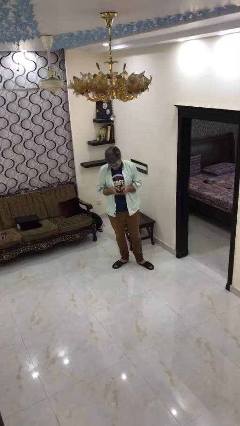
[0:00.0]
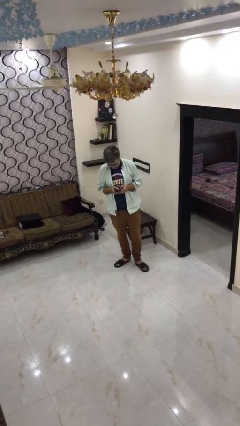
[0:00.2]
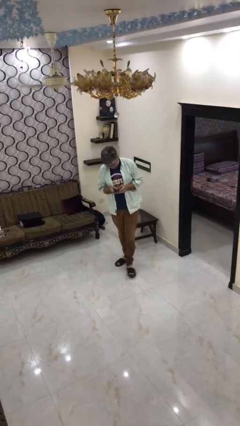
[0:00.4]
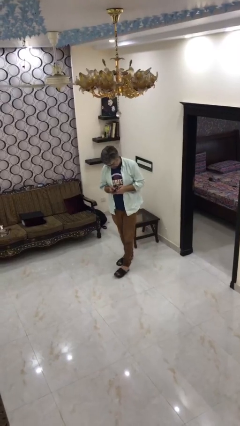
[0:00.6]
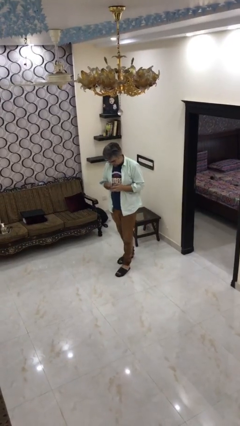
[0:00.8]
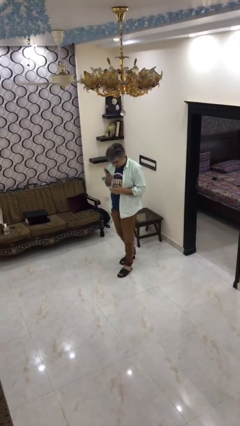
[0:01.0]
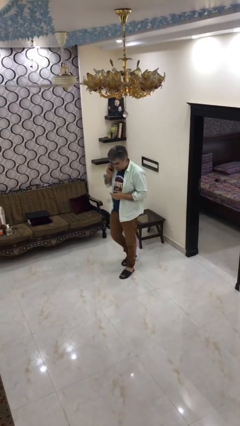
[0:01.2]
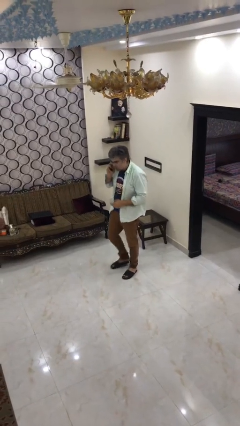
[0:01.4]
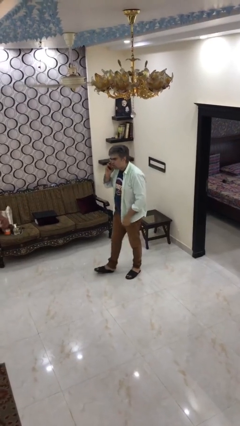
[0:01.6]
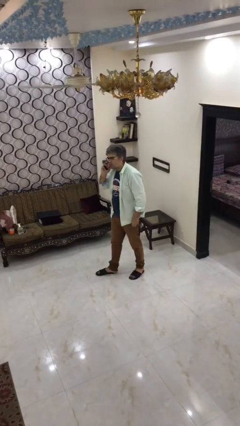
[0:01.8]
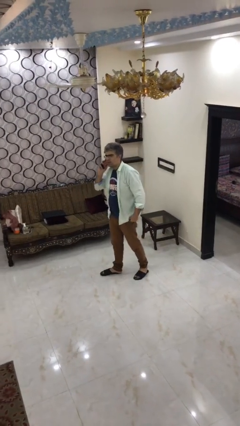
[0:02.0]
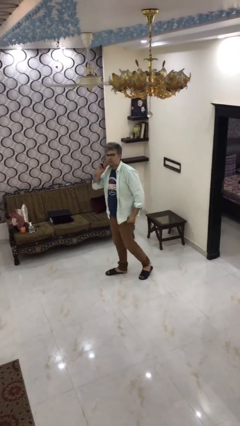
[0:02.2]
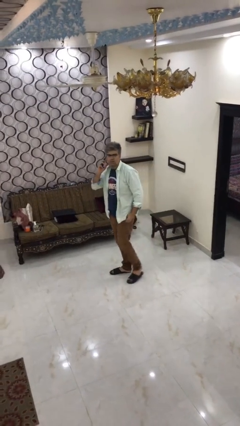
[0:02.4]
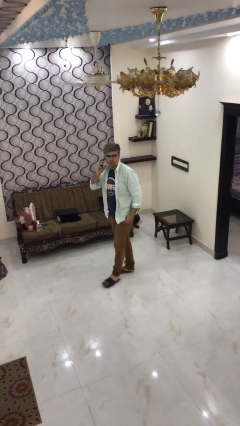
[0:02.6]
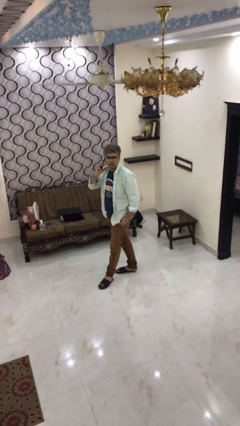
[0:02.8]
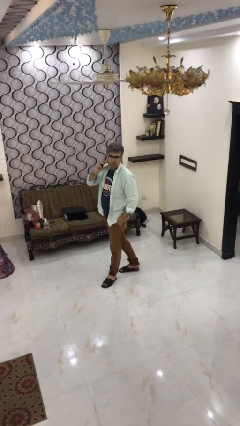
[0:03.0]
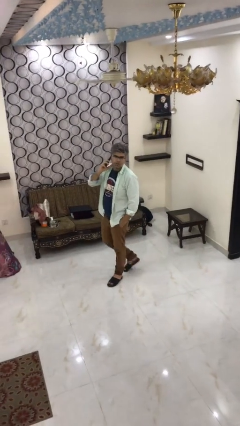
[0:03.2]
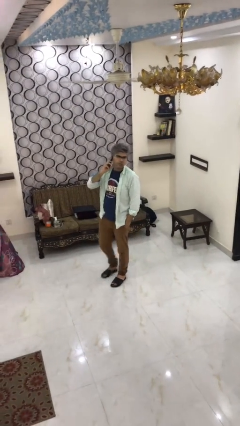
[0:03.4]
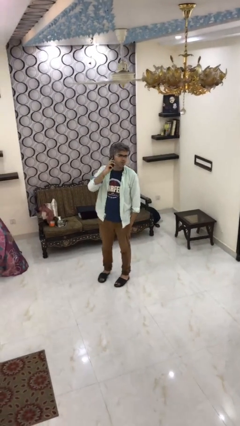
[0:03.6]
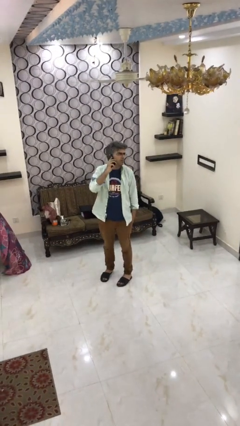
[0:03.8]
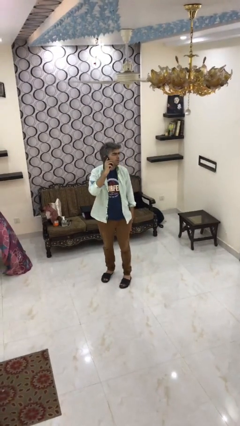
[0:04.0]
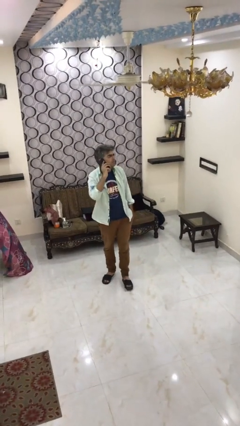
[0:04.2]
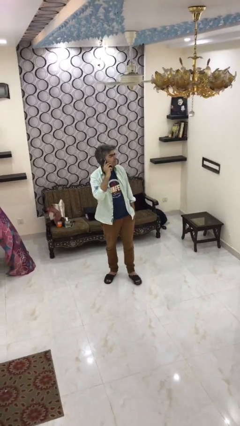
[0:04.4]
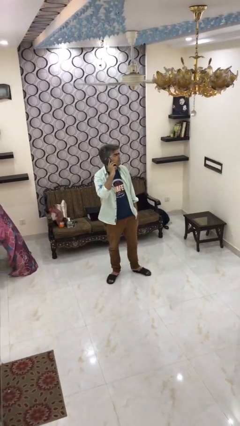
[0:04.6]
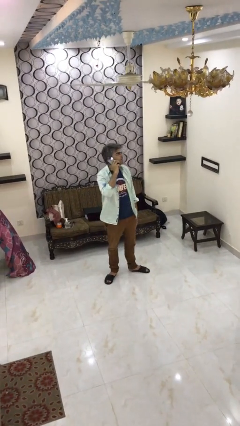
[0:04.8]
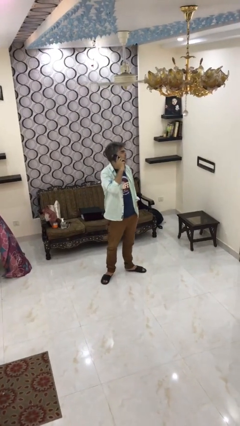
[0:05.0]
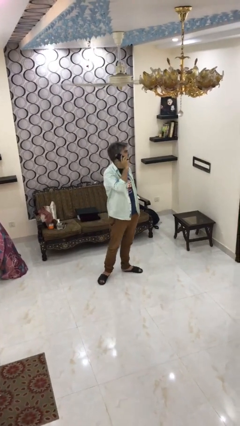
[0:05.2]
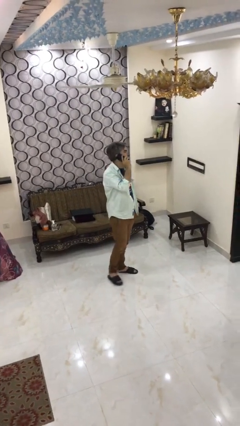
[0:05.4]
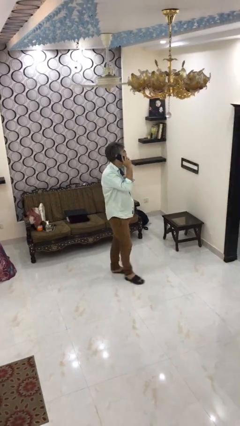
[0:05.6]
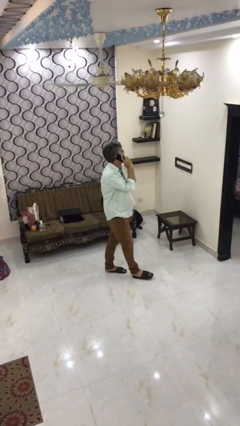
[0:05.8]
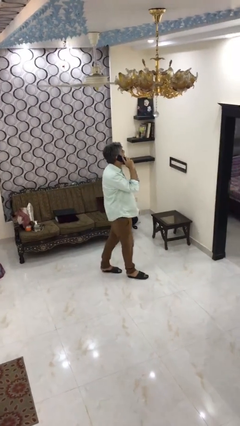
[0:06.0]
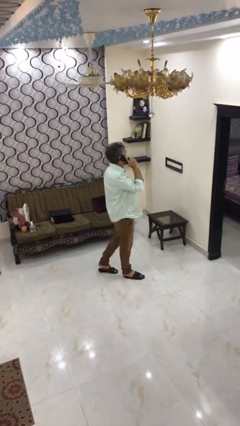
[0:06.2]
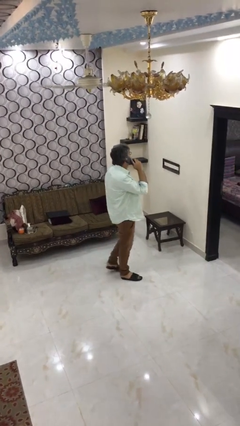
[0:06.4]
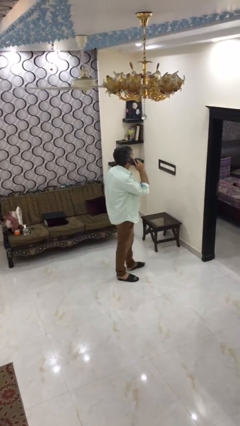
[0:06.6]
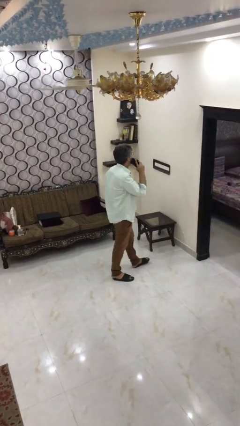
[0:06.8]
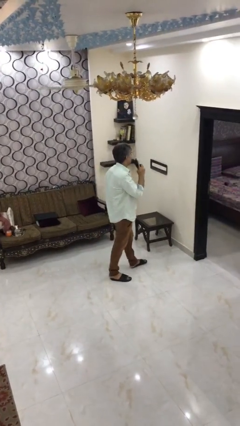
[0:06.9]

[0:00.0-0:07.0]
person talks on phone

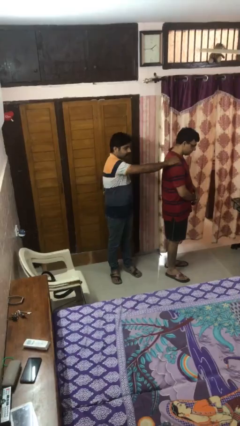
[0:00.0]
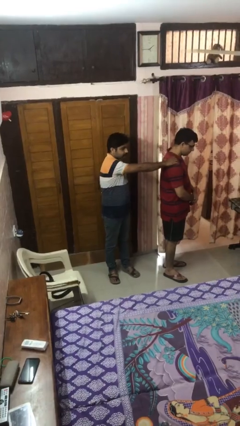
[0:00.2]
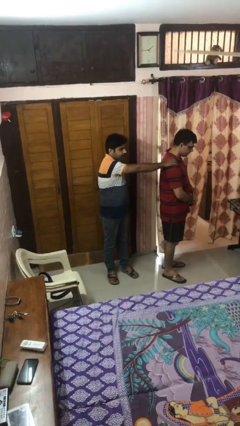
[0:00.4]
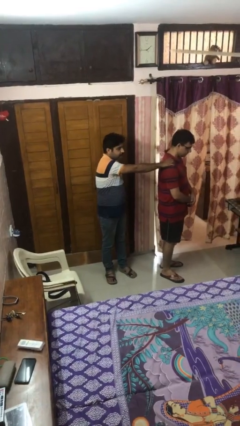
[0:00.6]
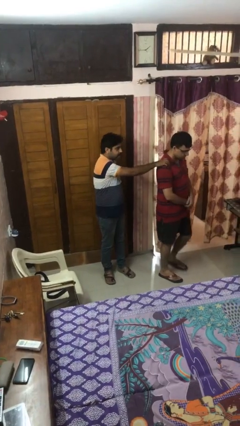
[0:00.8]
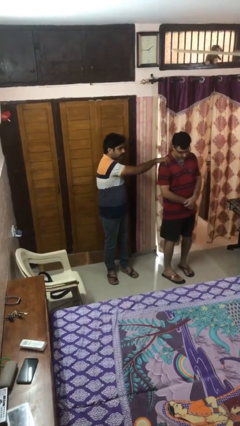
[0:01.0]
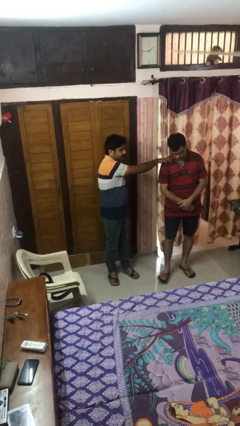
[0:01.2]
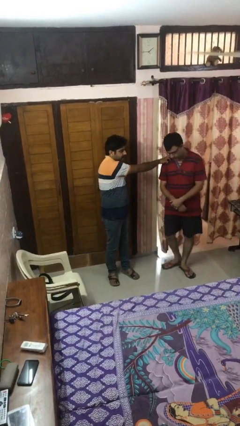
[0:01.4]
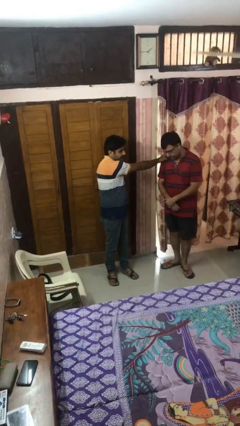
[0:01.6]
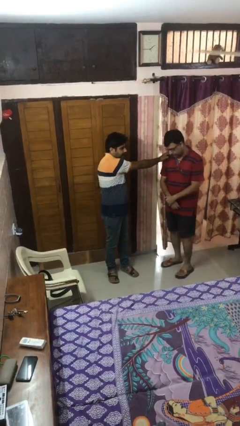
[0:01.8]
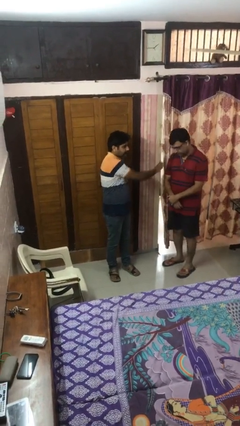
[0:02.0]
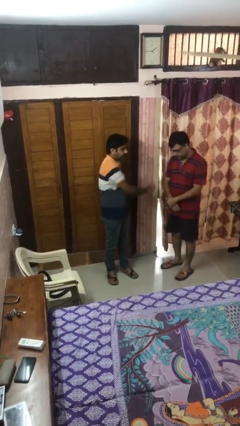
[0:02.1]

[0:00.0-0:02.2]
person spins person around

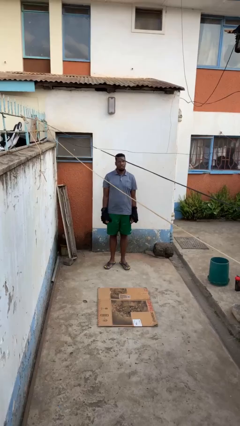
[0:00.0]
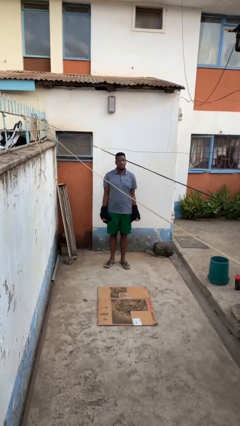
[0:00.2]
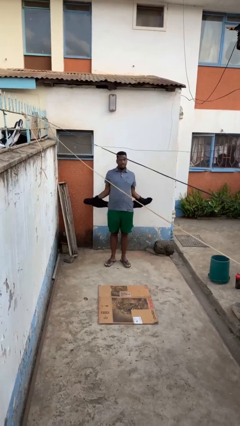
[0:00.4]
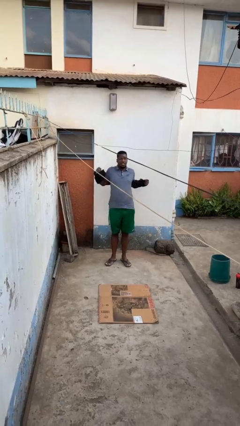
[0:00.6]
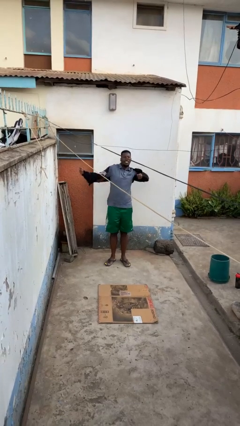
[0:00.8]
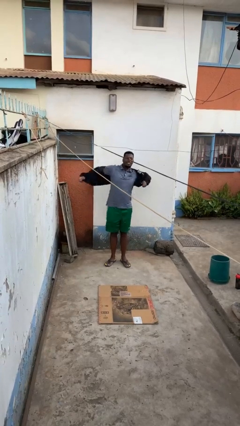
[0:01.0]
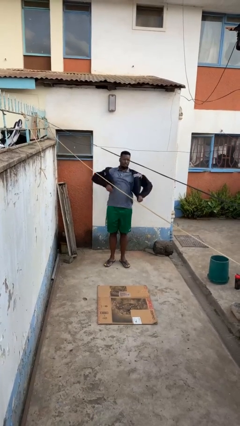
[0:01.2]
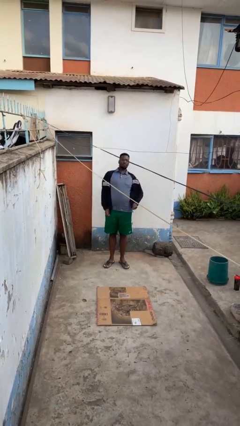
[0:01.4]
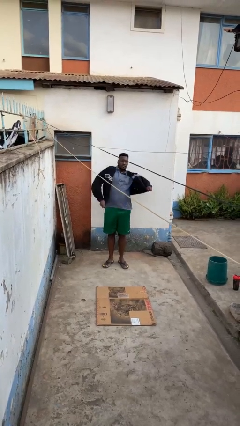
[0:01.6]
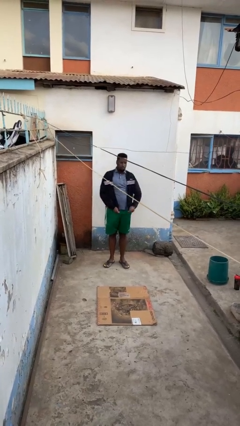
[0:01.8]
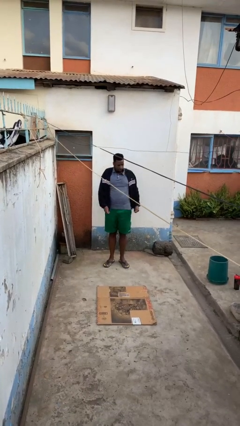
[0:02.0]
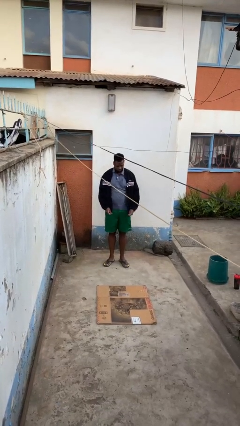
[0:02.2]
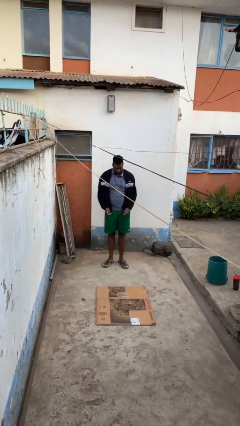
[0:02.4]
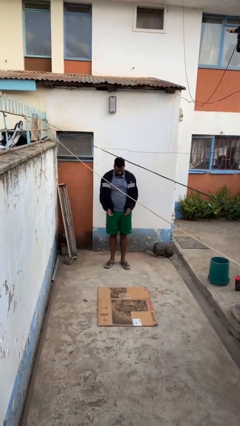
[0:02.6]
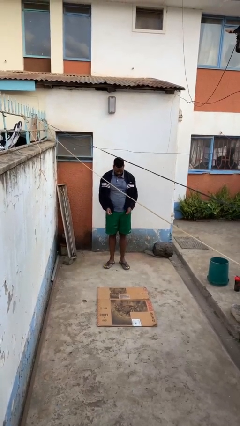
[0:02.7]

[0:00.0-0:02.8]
person puts on jacket

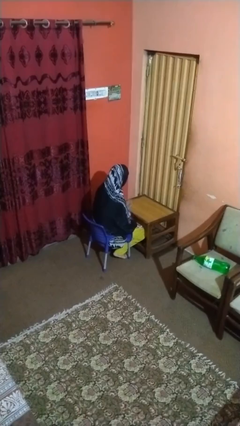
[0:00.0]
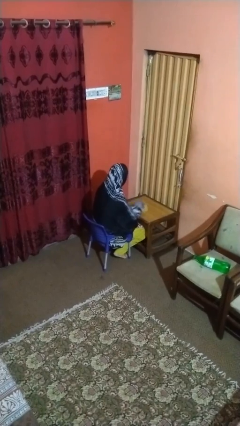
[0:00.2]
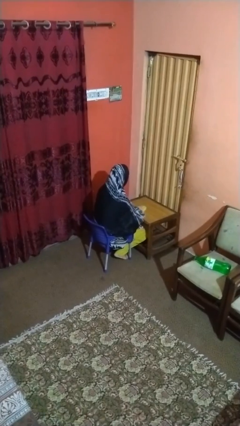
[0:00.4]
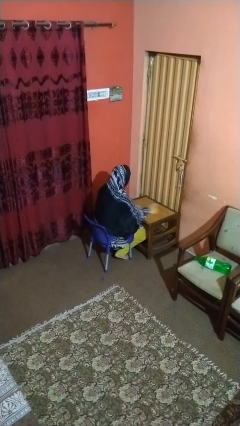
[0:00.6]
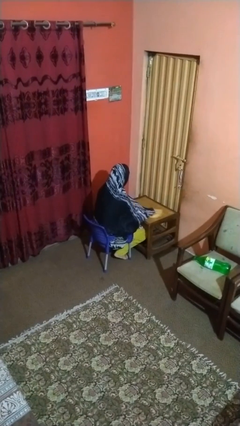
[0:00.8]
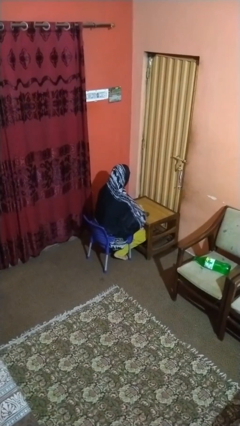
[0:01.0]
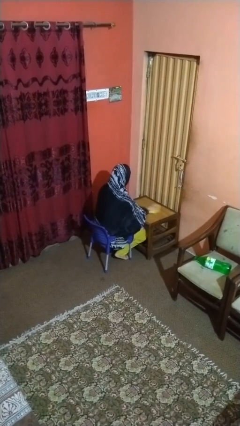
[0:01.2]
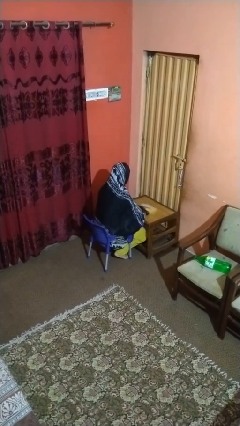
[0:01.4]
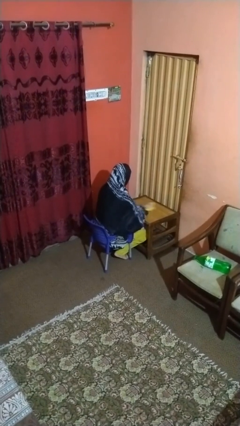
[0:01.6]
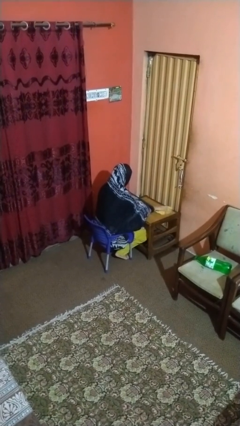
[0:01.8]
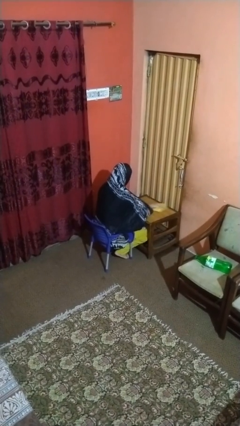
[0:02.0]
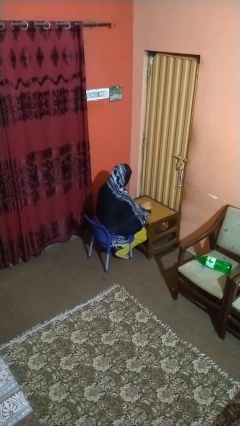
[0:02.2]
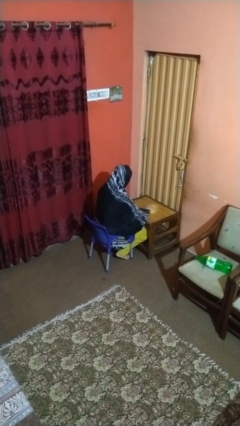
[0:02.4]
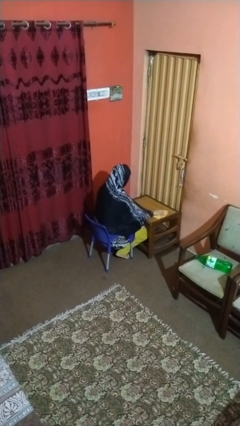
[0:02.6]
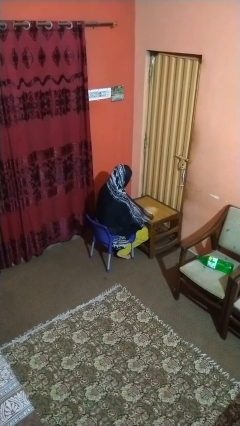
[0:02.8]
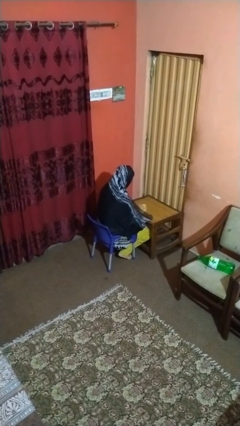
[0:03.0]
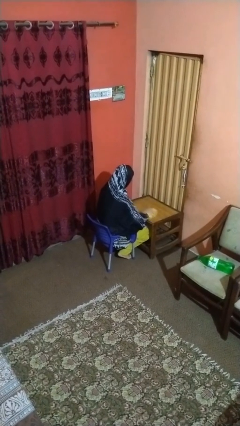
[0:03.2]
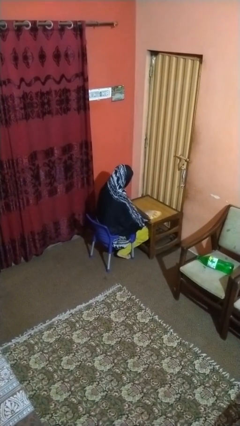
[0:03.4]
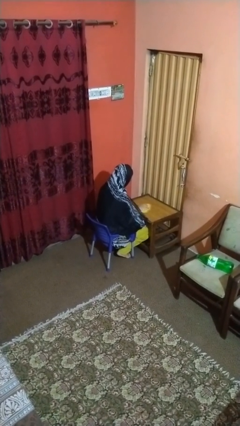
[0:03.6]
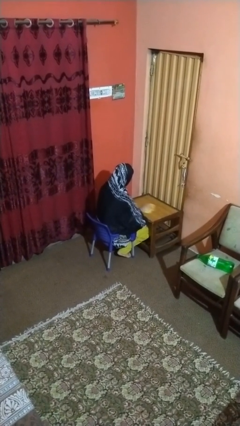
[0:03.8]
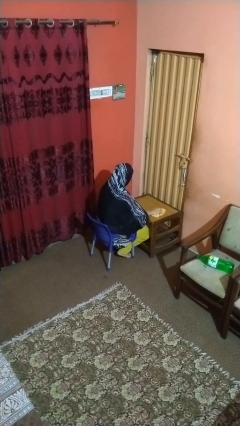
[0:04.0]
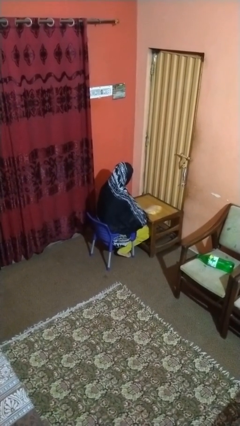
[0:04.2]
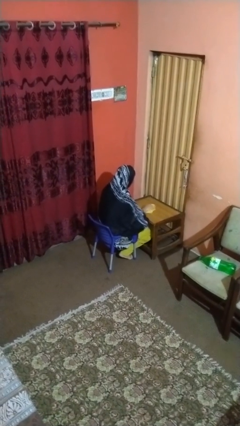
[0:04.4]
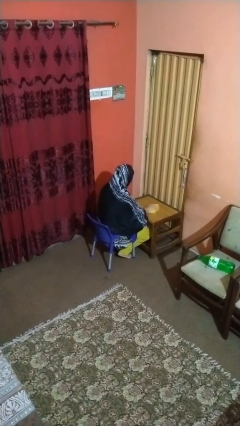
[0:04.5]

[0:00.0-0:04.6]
person cleans table with rag

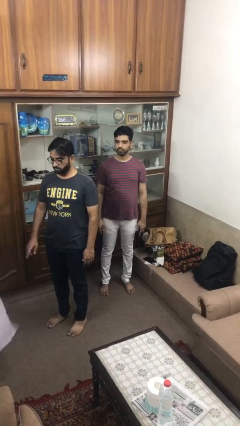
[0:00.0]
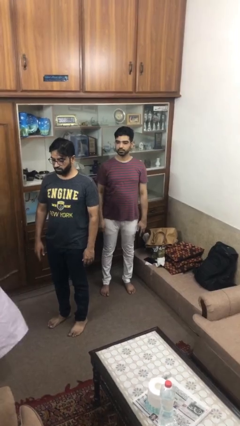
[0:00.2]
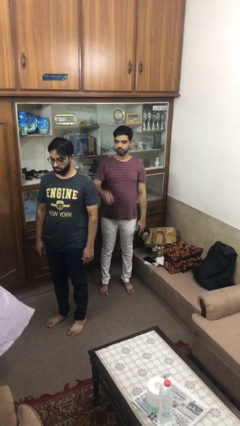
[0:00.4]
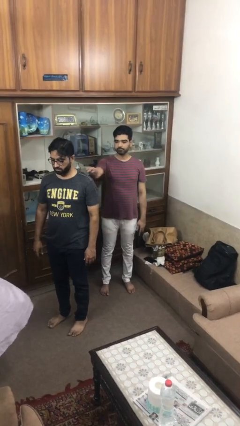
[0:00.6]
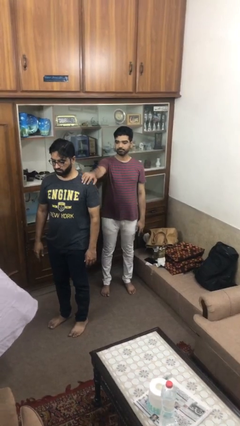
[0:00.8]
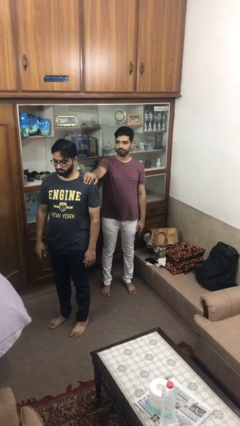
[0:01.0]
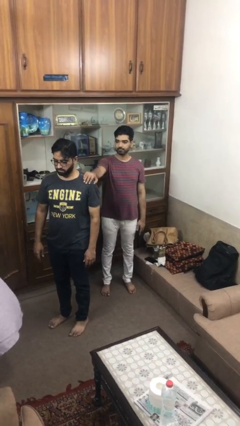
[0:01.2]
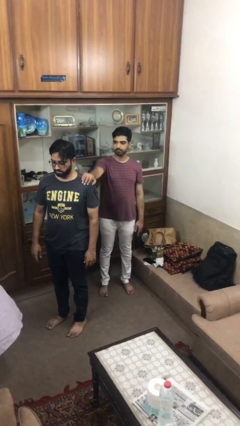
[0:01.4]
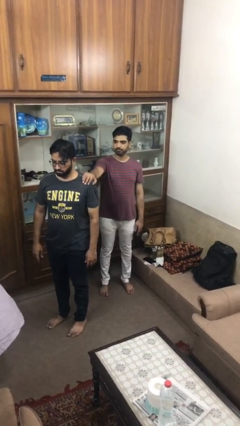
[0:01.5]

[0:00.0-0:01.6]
person grabs person by shoulder
